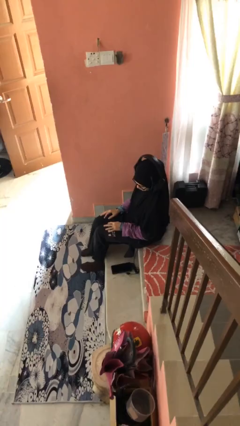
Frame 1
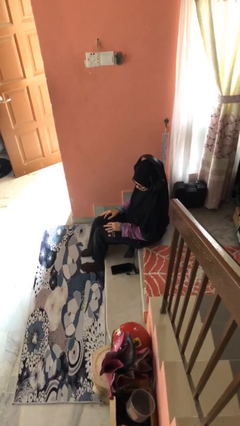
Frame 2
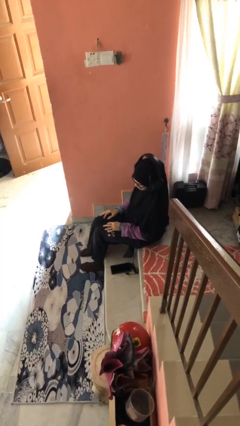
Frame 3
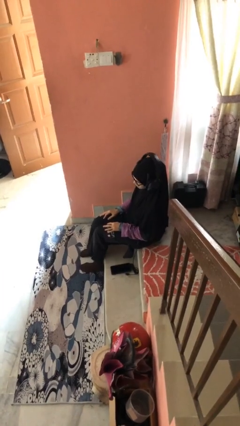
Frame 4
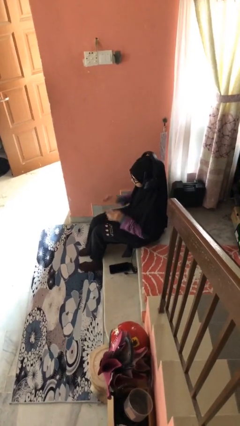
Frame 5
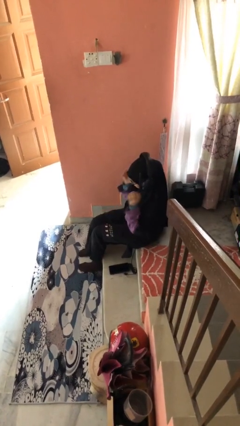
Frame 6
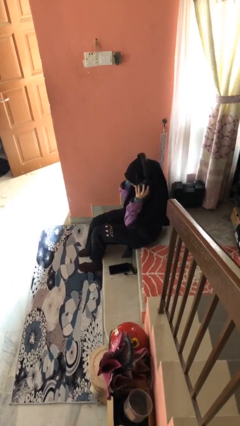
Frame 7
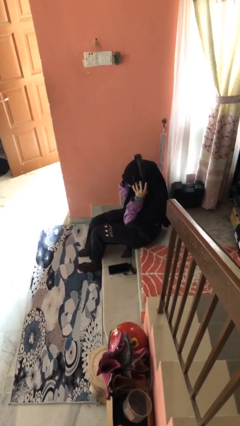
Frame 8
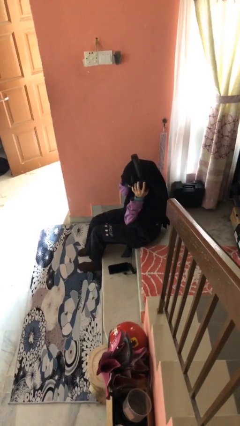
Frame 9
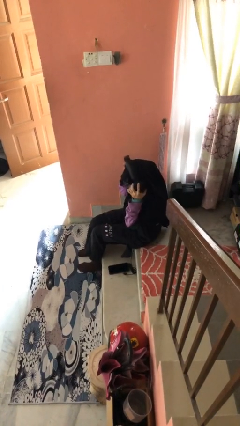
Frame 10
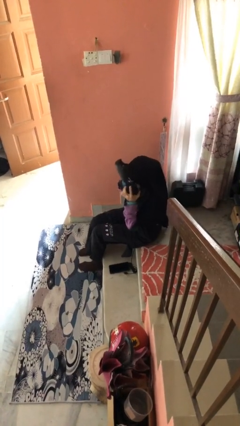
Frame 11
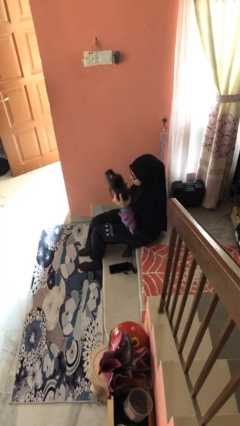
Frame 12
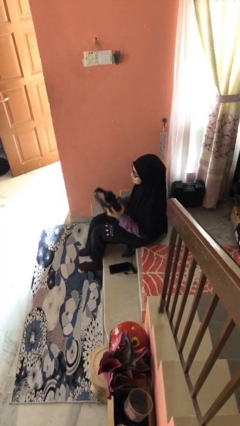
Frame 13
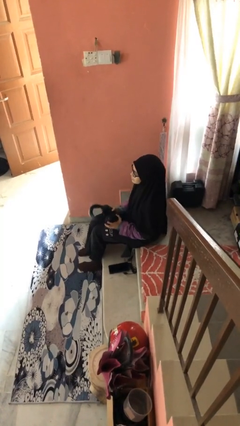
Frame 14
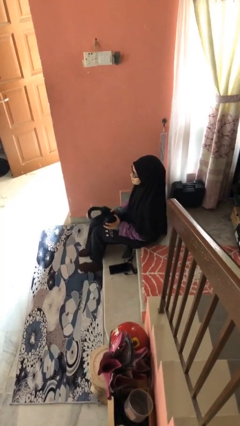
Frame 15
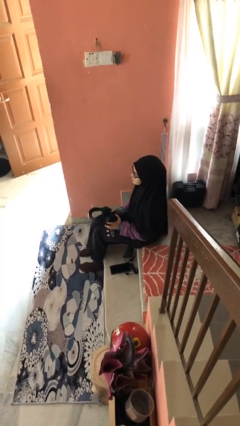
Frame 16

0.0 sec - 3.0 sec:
person takes off headphones

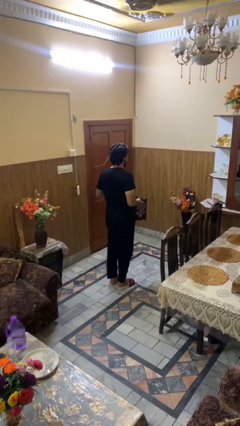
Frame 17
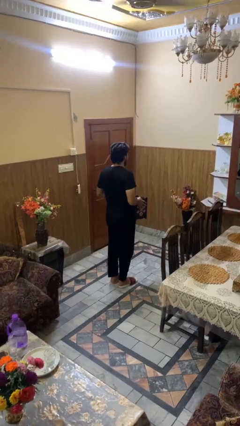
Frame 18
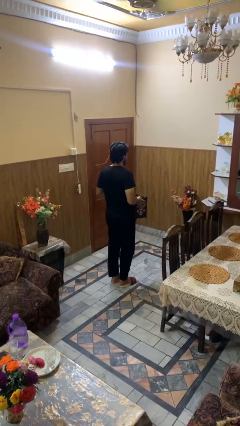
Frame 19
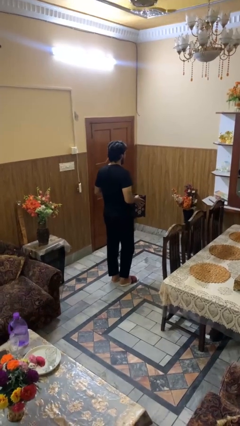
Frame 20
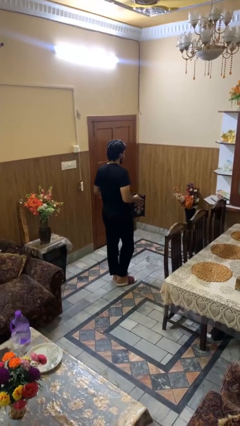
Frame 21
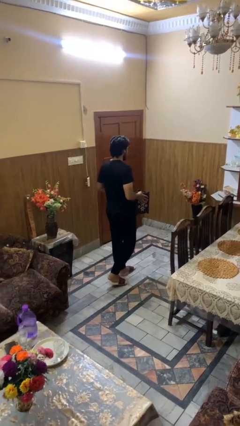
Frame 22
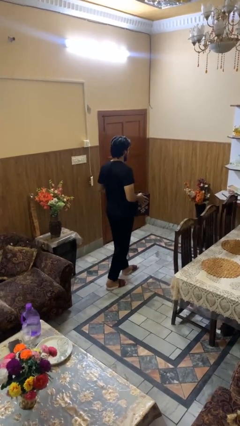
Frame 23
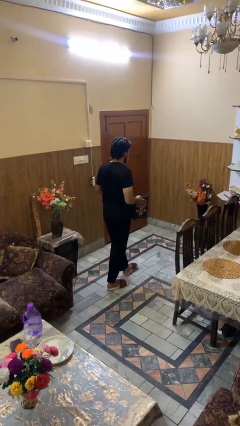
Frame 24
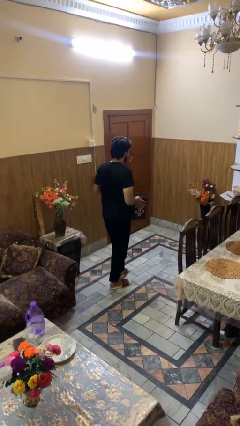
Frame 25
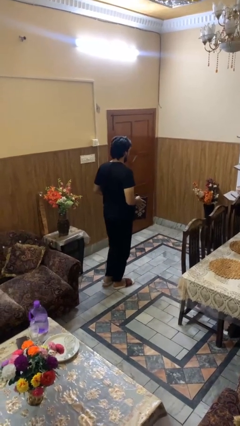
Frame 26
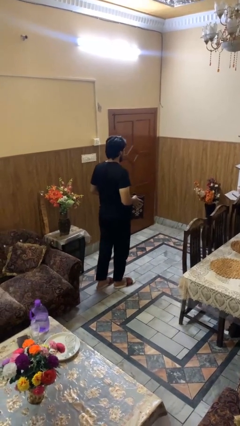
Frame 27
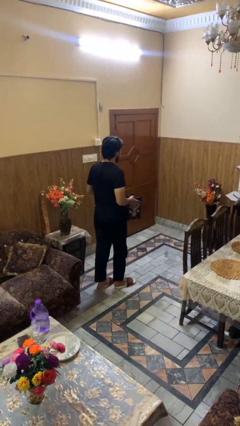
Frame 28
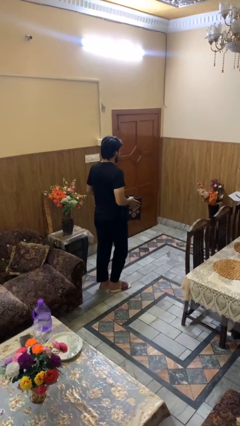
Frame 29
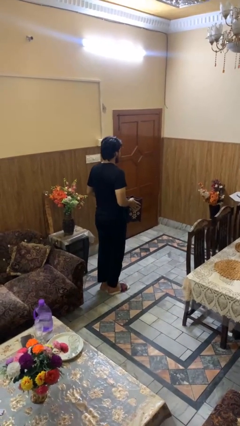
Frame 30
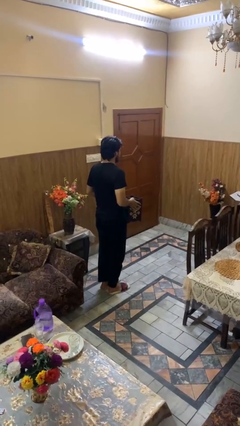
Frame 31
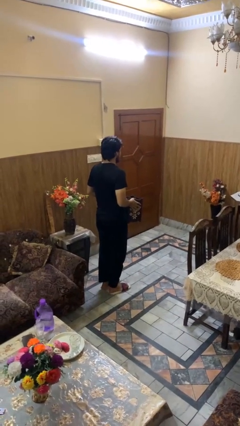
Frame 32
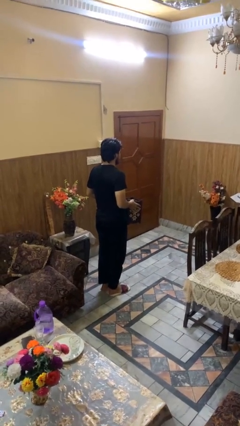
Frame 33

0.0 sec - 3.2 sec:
person carries groceries

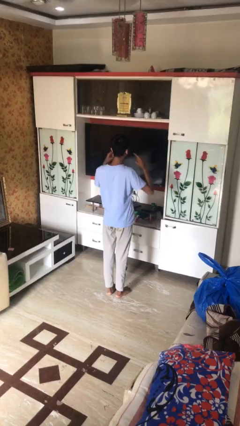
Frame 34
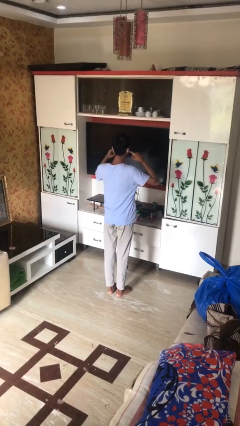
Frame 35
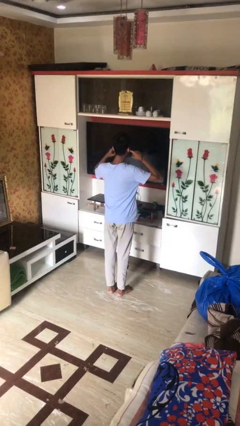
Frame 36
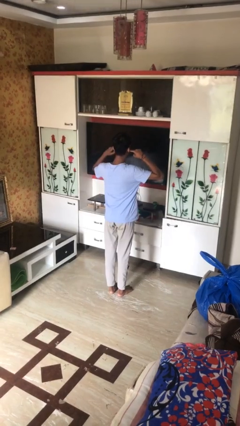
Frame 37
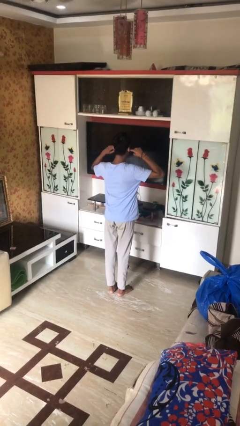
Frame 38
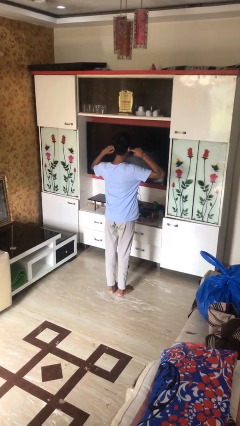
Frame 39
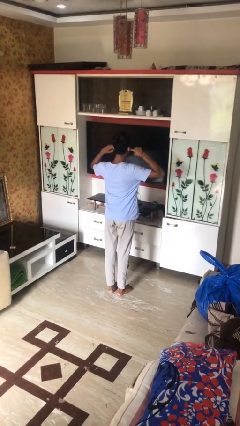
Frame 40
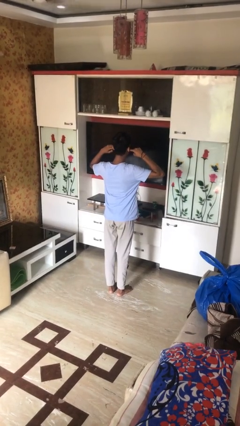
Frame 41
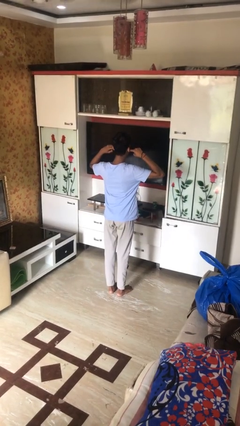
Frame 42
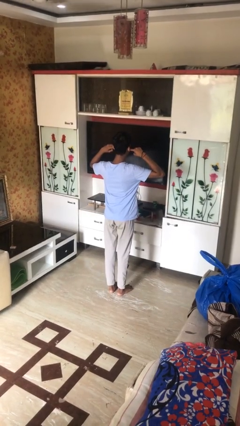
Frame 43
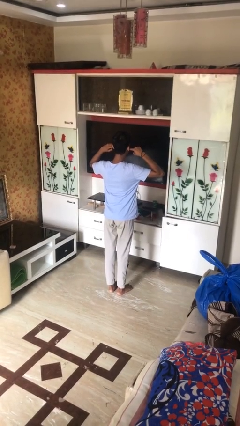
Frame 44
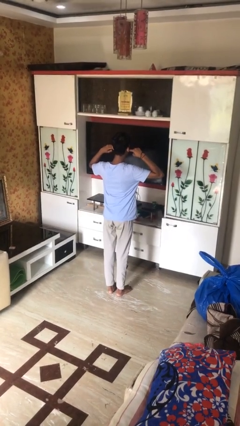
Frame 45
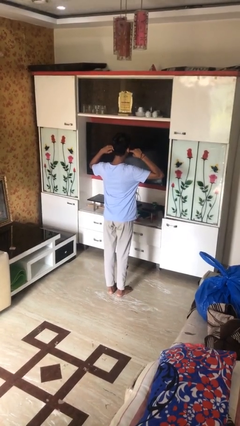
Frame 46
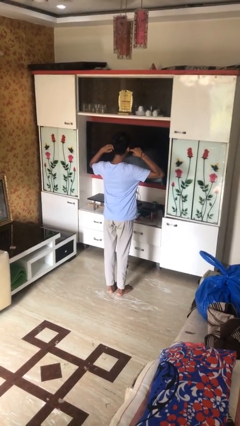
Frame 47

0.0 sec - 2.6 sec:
person puts fingers in ear

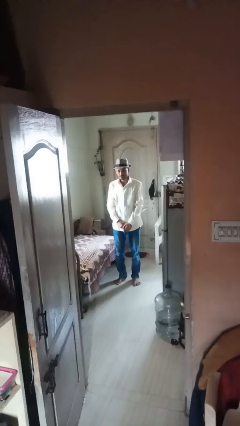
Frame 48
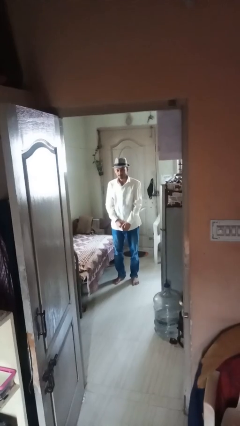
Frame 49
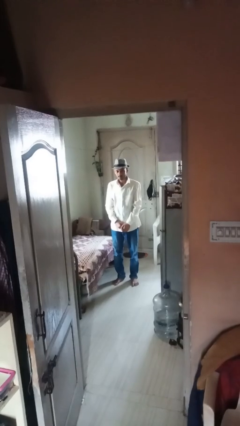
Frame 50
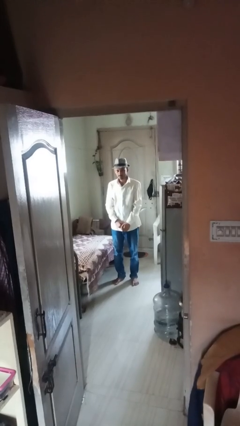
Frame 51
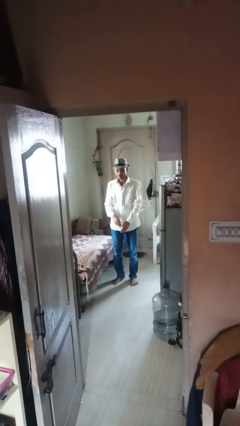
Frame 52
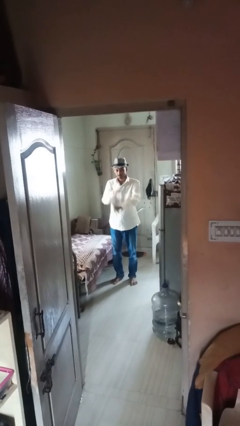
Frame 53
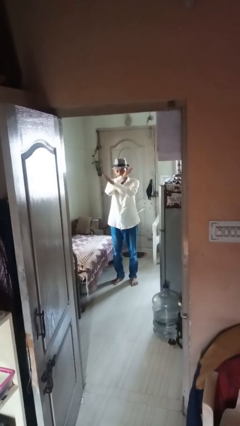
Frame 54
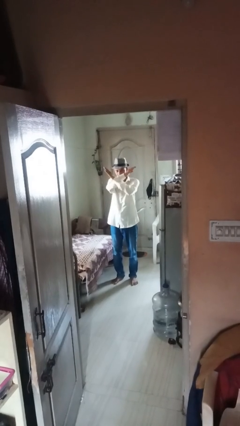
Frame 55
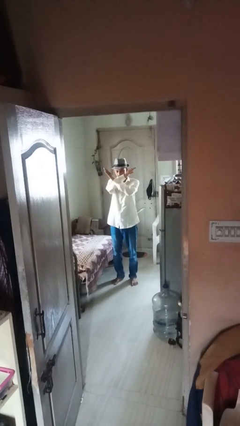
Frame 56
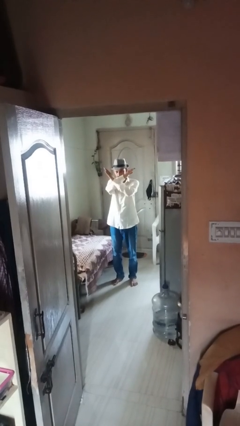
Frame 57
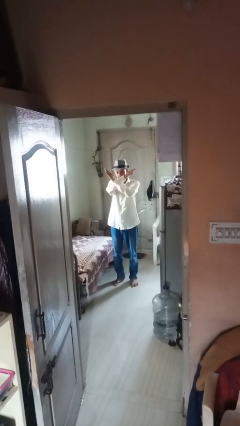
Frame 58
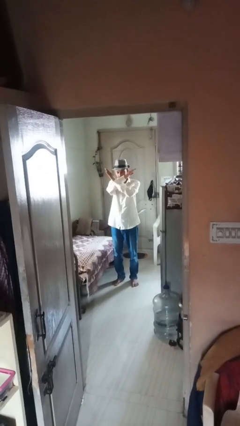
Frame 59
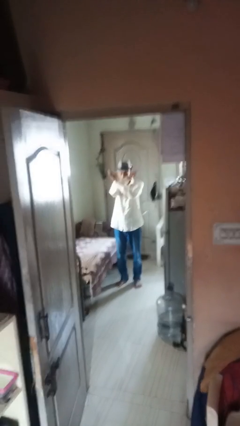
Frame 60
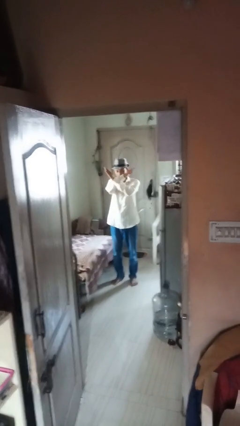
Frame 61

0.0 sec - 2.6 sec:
person gestures arms x

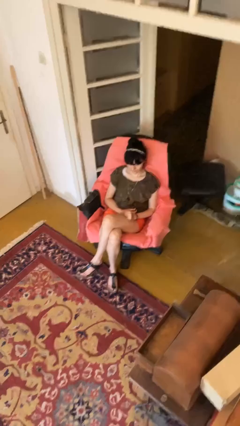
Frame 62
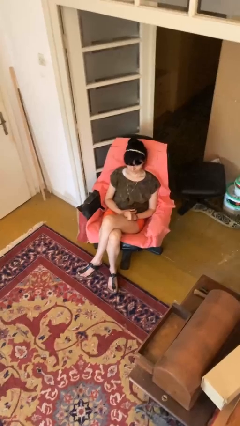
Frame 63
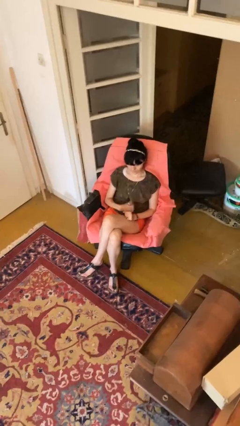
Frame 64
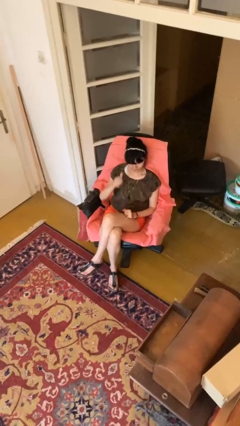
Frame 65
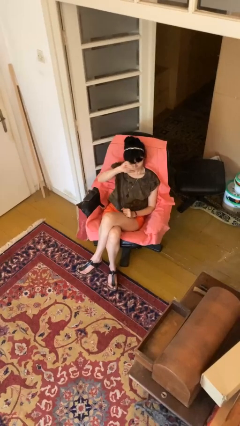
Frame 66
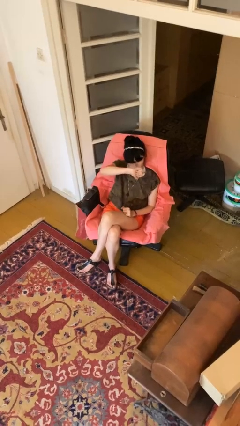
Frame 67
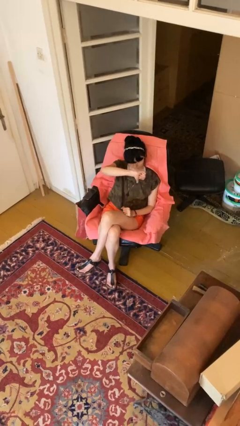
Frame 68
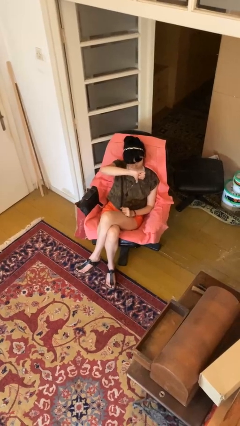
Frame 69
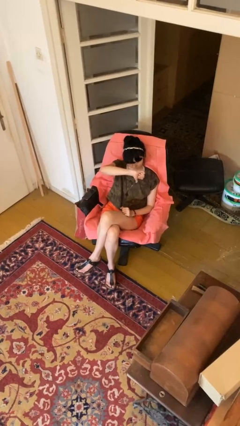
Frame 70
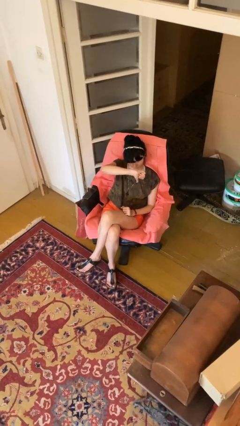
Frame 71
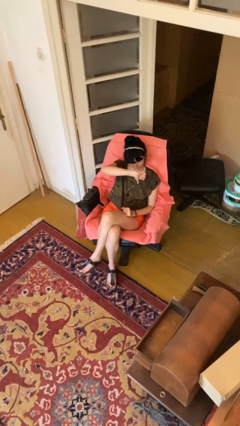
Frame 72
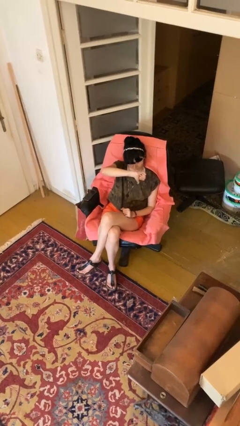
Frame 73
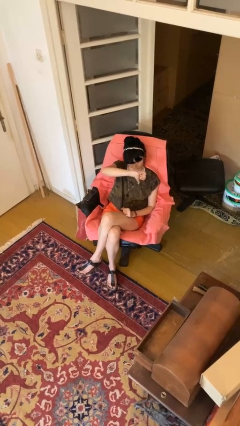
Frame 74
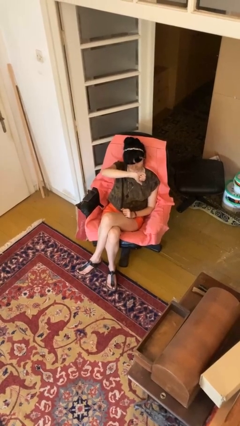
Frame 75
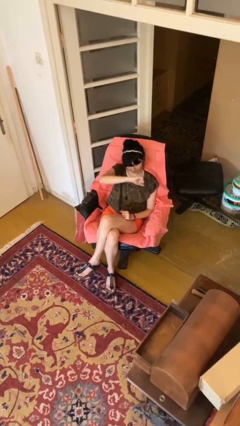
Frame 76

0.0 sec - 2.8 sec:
person gestures thumbs down

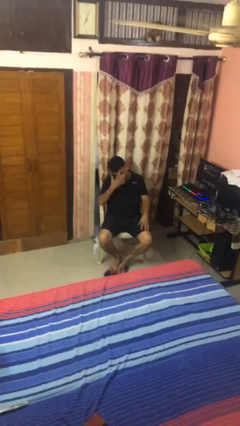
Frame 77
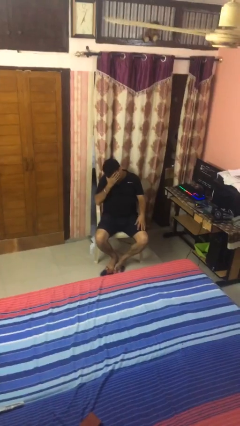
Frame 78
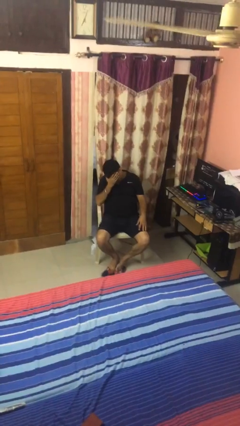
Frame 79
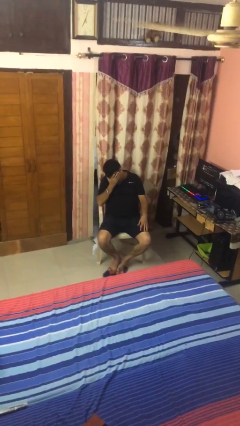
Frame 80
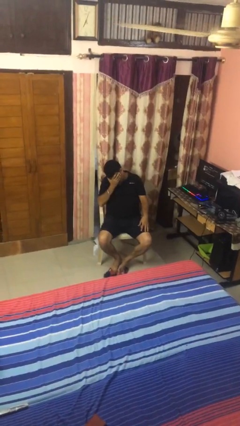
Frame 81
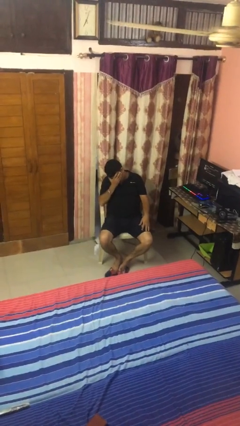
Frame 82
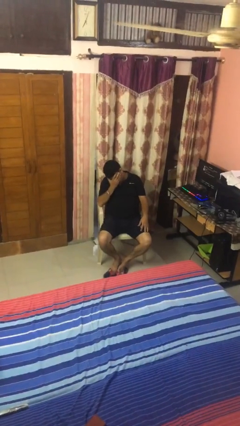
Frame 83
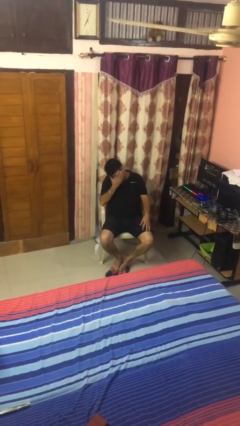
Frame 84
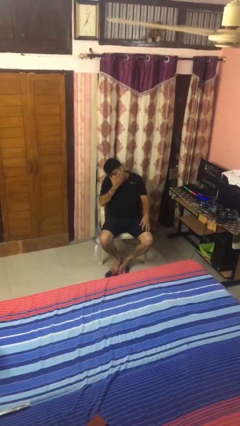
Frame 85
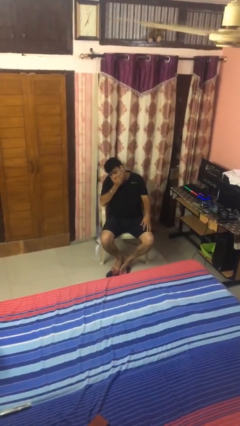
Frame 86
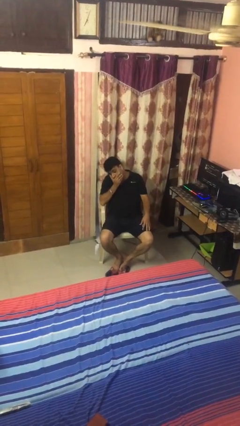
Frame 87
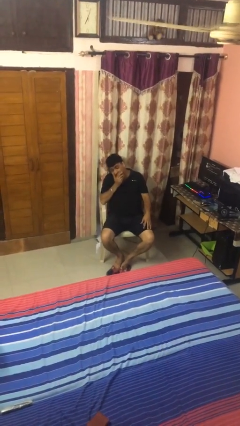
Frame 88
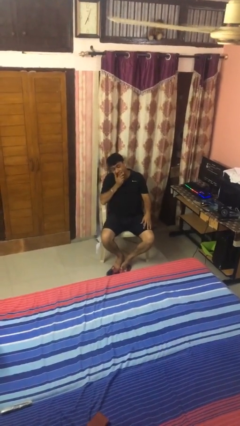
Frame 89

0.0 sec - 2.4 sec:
person covers face with hands

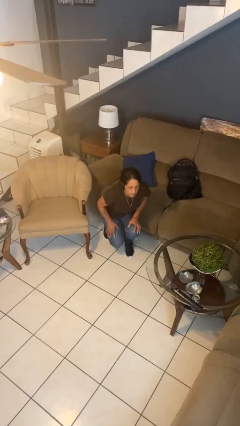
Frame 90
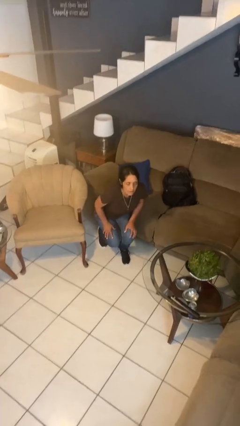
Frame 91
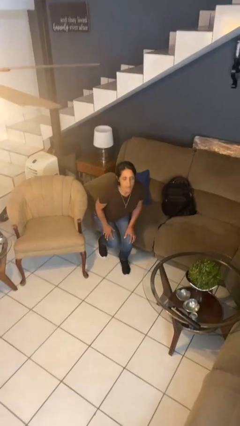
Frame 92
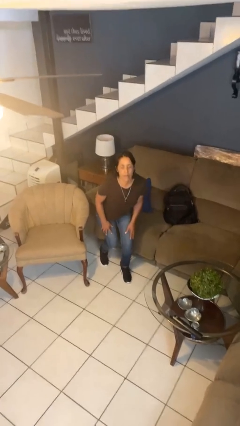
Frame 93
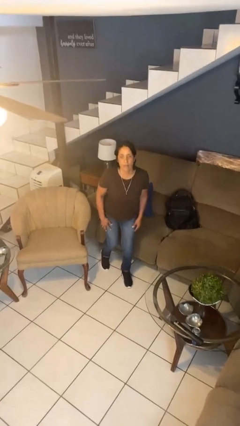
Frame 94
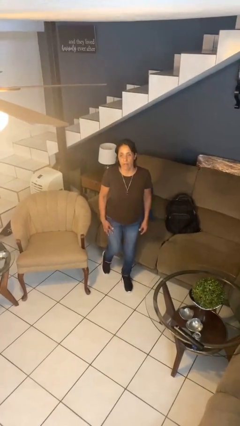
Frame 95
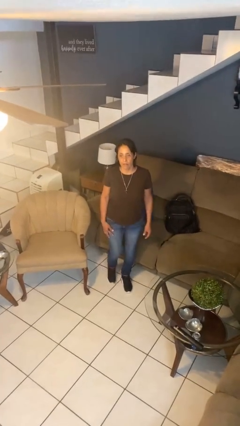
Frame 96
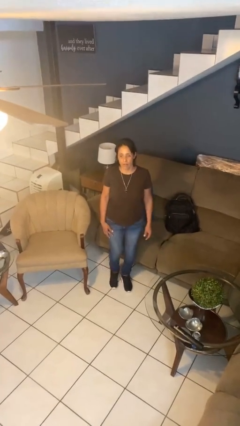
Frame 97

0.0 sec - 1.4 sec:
person stands up from floor
